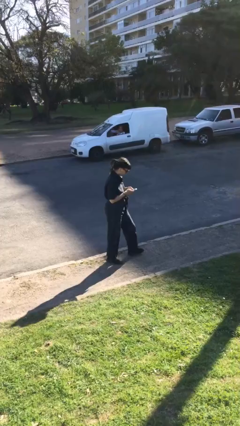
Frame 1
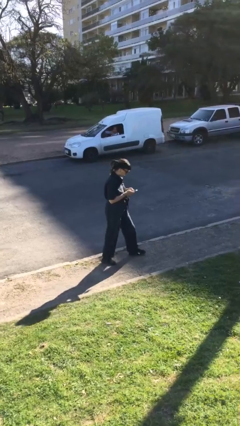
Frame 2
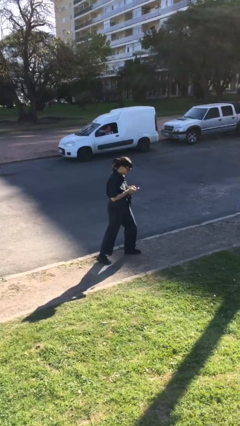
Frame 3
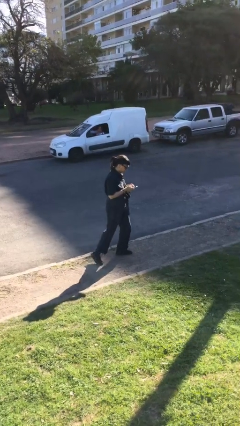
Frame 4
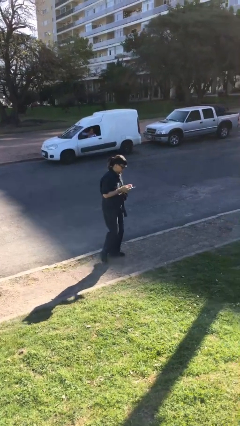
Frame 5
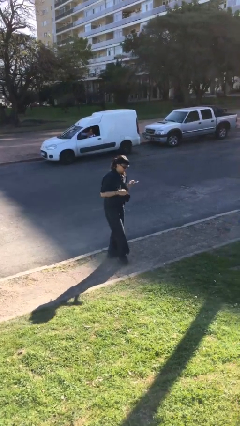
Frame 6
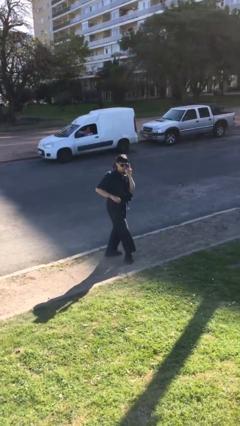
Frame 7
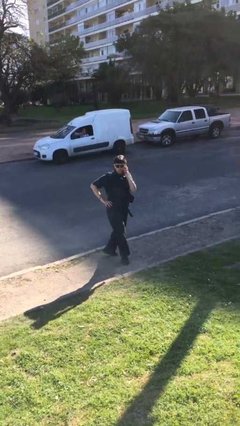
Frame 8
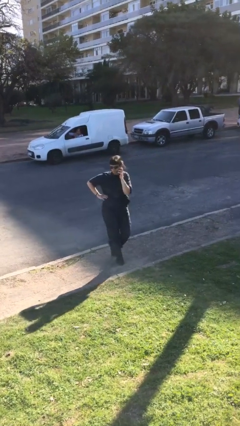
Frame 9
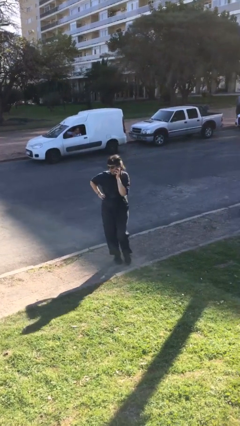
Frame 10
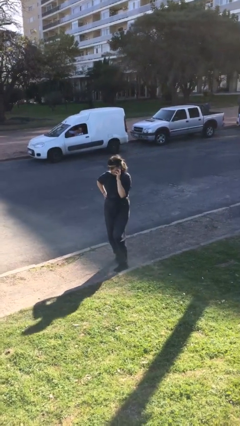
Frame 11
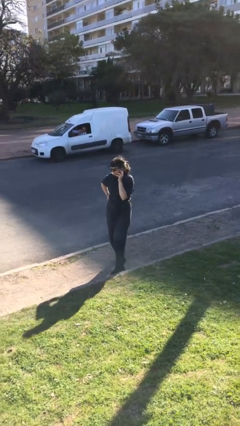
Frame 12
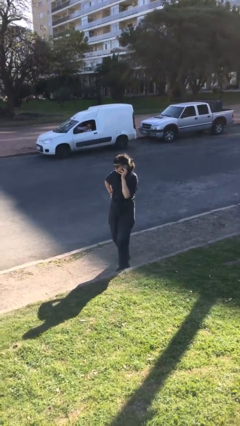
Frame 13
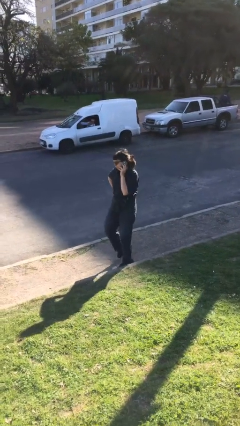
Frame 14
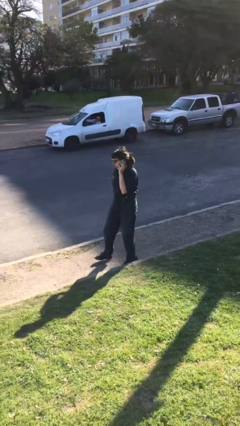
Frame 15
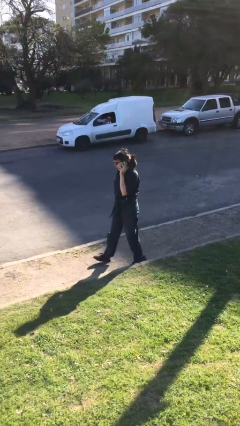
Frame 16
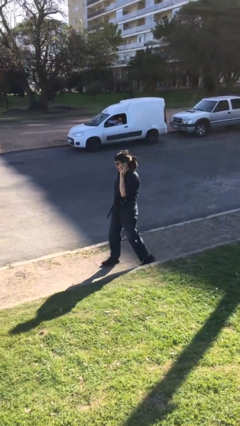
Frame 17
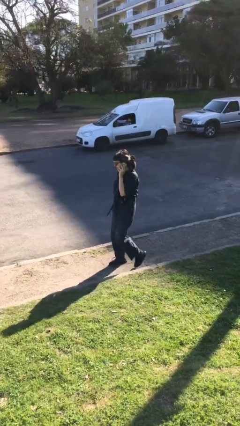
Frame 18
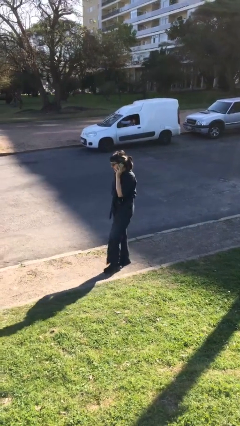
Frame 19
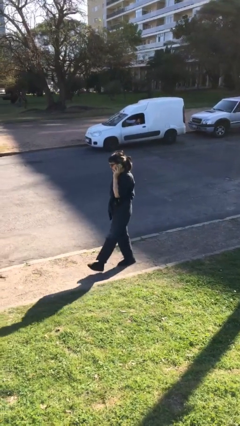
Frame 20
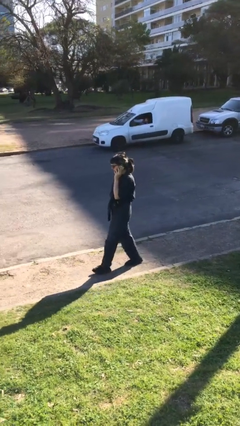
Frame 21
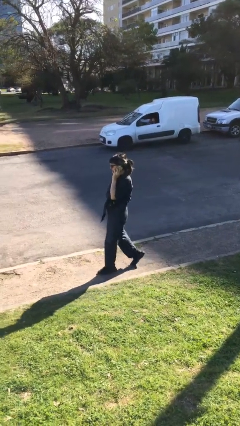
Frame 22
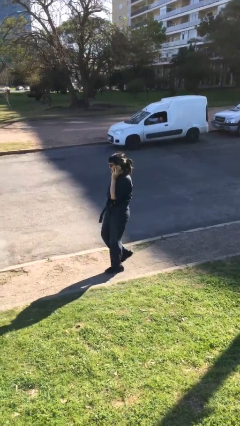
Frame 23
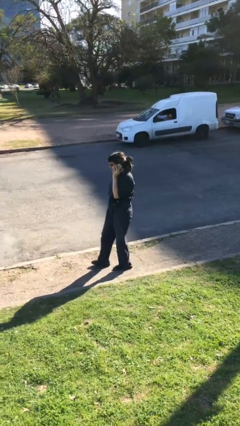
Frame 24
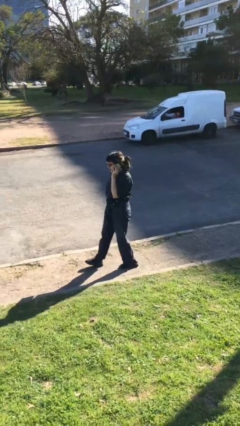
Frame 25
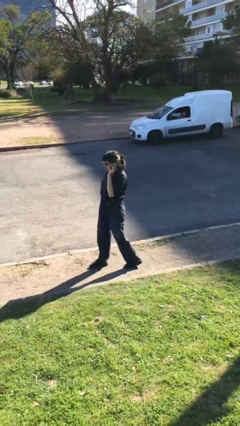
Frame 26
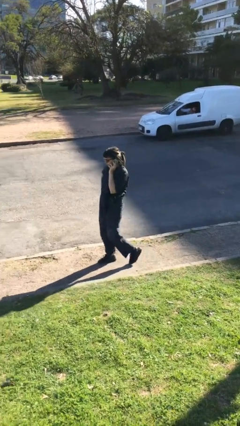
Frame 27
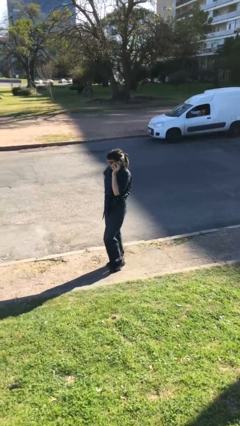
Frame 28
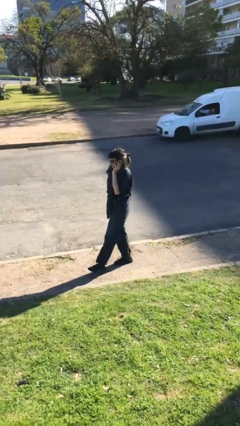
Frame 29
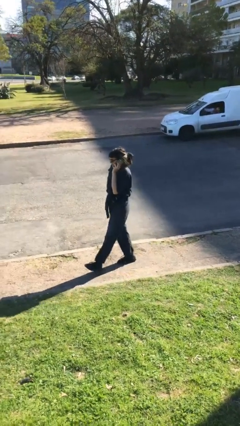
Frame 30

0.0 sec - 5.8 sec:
person talks on phone

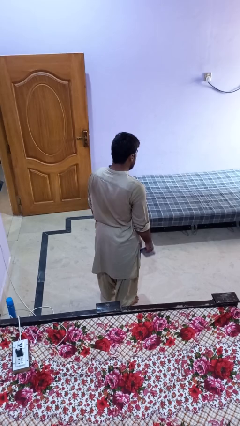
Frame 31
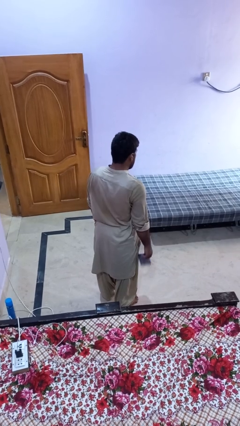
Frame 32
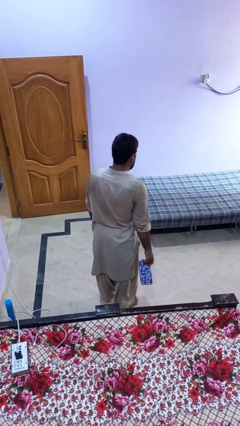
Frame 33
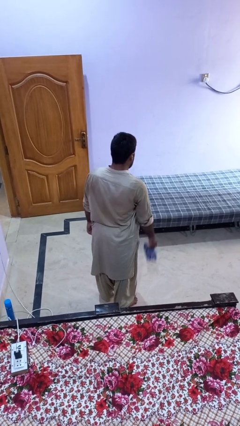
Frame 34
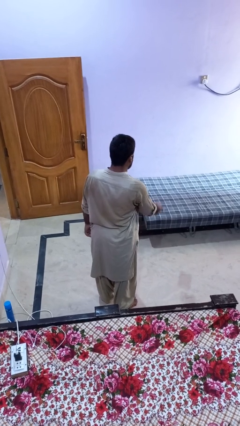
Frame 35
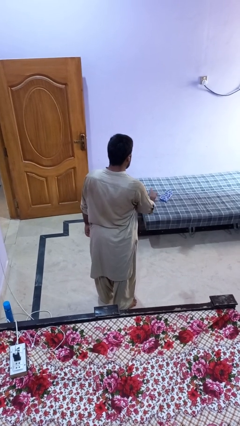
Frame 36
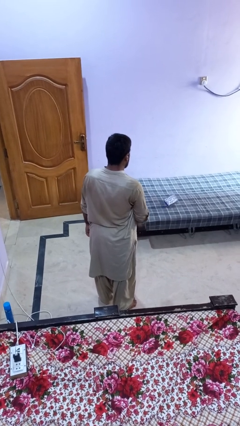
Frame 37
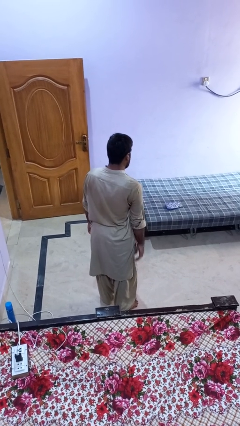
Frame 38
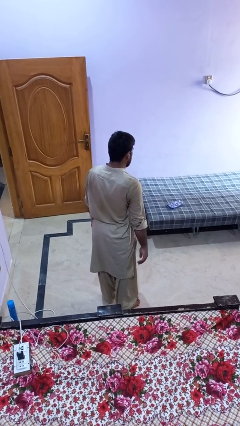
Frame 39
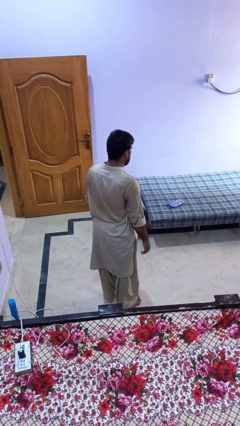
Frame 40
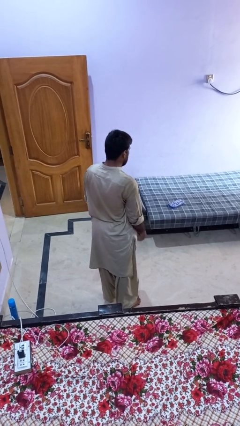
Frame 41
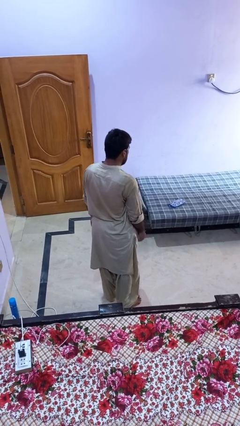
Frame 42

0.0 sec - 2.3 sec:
person throws object on bed

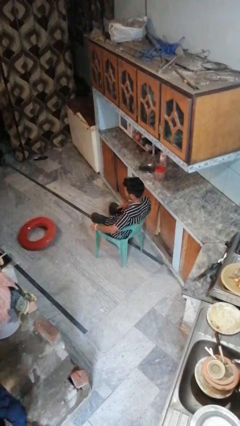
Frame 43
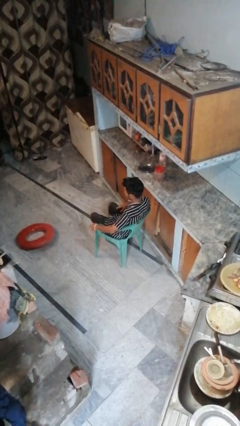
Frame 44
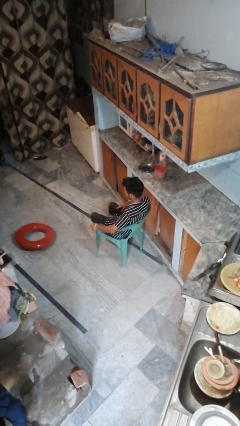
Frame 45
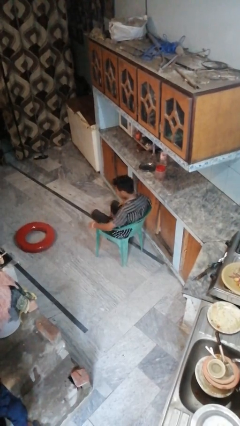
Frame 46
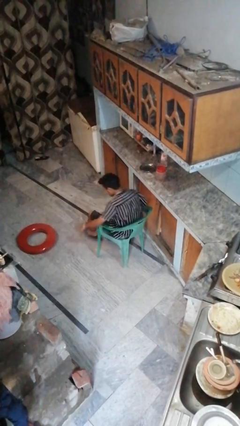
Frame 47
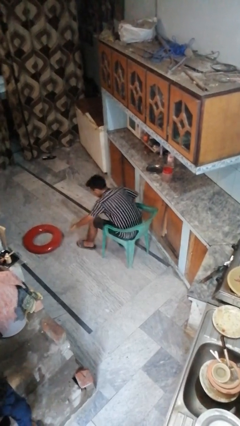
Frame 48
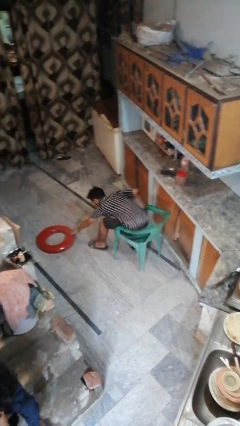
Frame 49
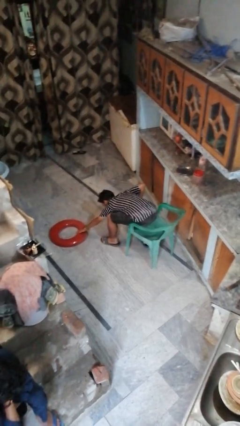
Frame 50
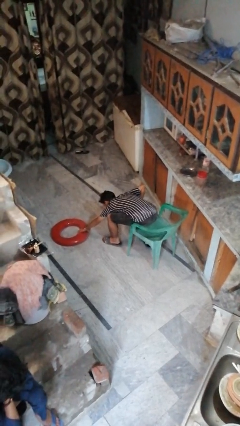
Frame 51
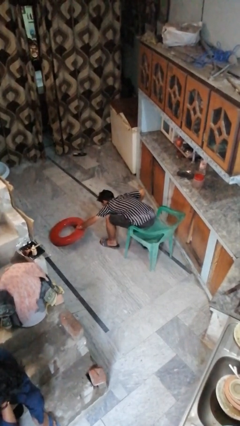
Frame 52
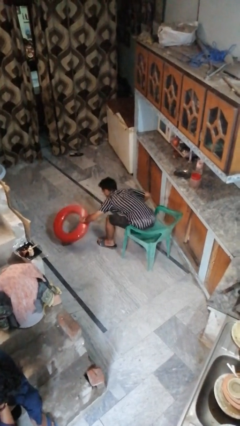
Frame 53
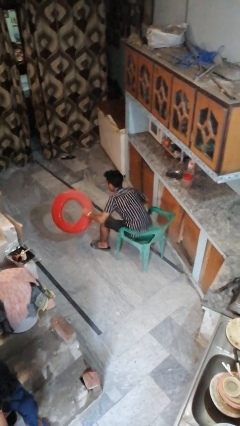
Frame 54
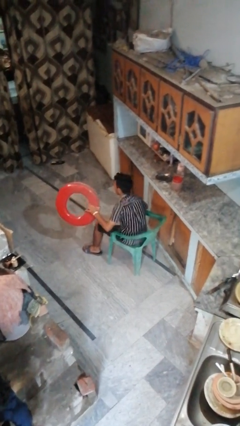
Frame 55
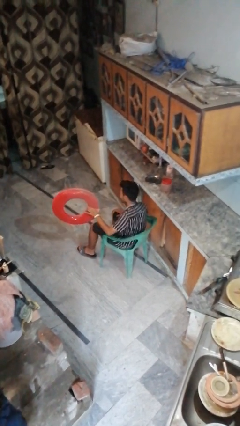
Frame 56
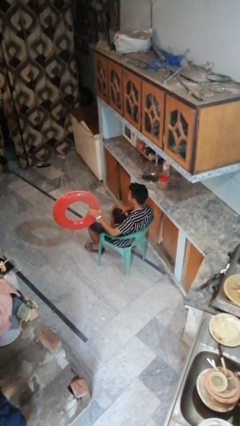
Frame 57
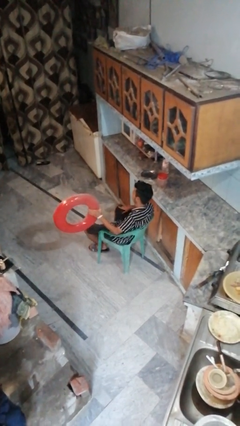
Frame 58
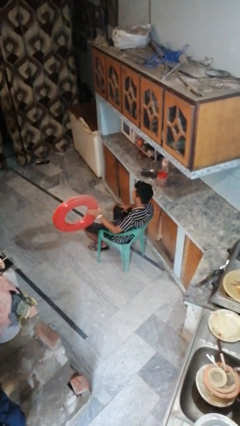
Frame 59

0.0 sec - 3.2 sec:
person picks up object from floor

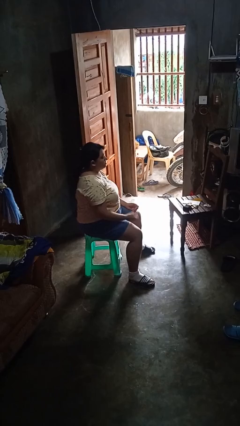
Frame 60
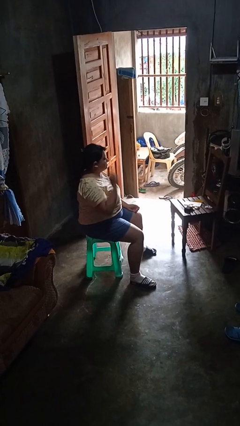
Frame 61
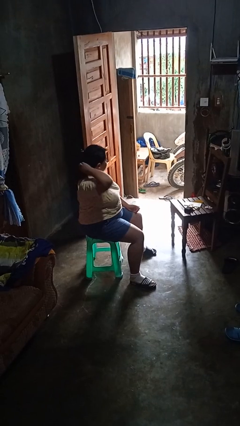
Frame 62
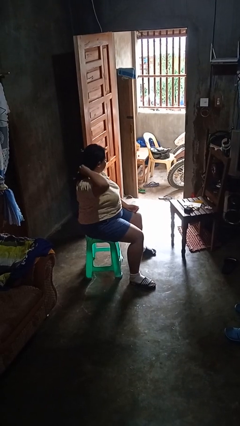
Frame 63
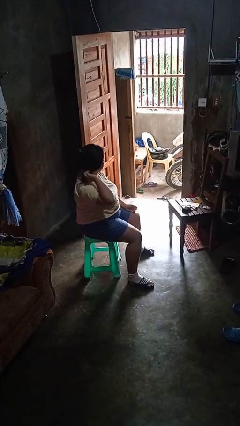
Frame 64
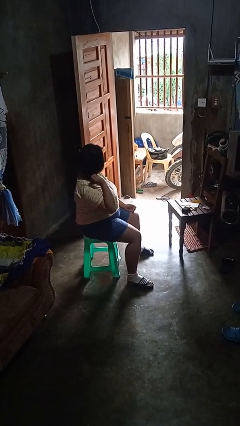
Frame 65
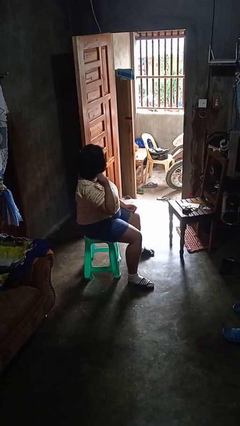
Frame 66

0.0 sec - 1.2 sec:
person takes off hairtie

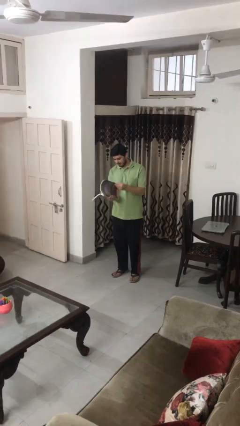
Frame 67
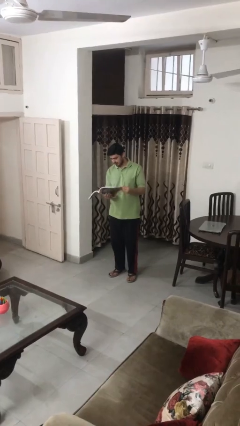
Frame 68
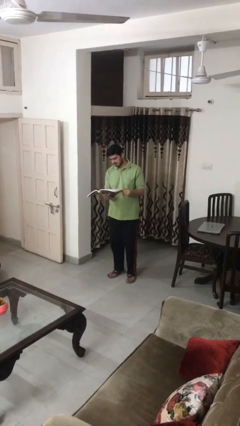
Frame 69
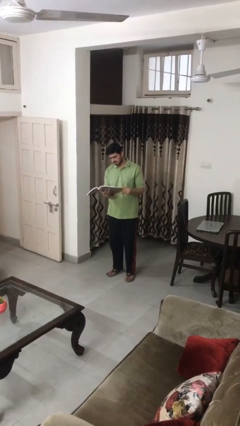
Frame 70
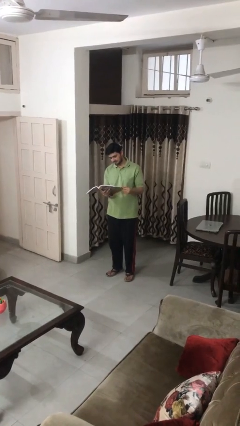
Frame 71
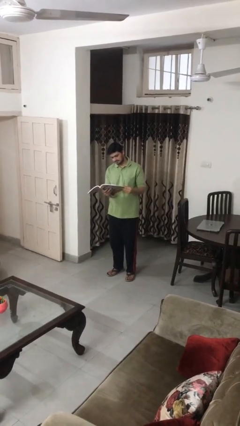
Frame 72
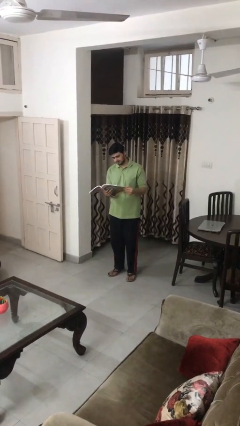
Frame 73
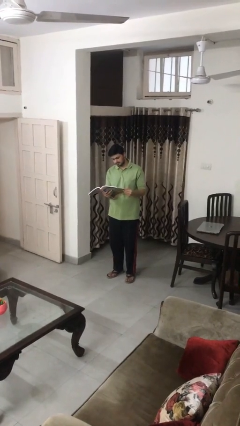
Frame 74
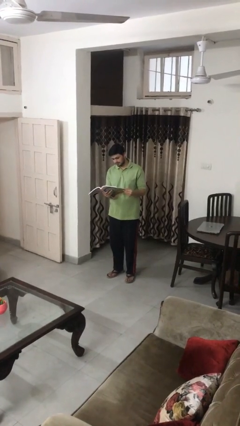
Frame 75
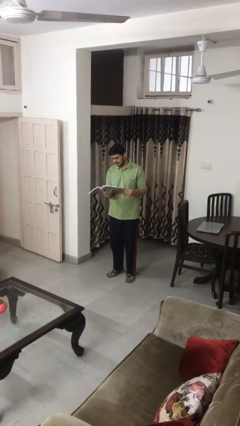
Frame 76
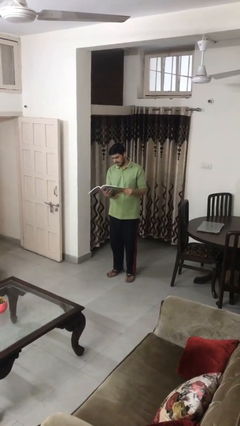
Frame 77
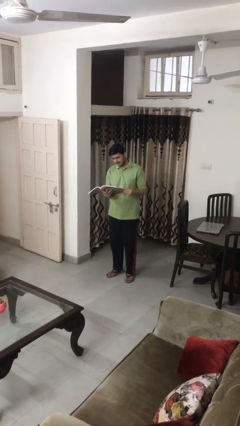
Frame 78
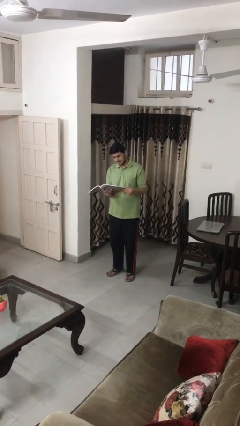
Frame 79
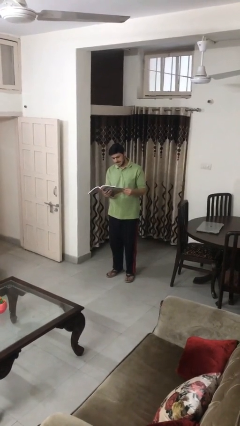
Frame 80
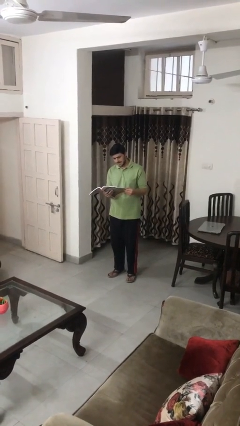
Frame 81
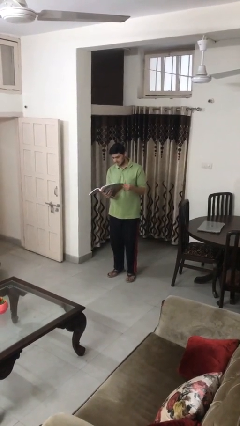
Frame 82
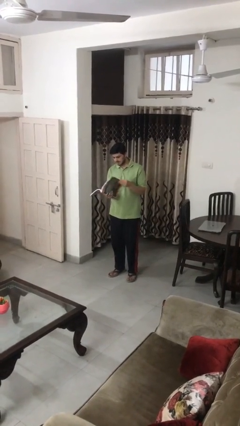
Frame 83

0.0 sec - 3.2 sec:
person reads document

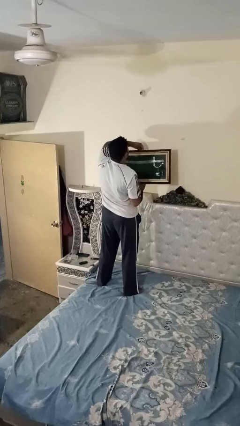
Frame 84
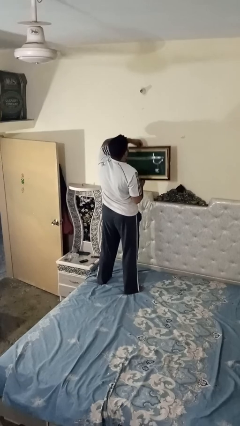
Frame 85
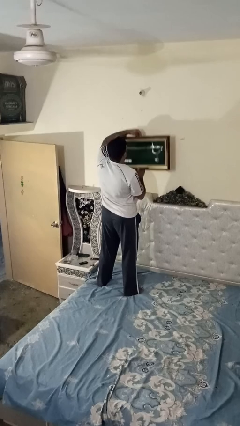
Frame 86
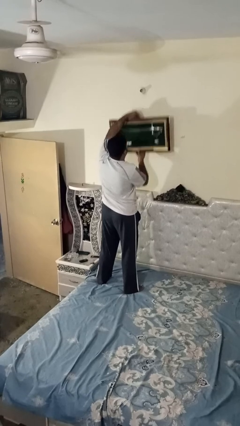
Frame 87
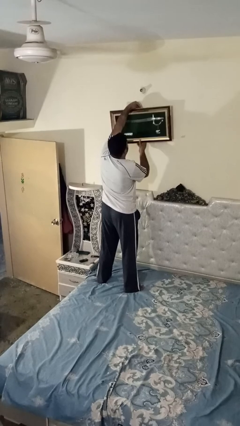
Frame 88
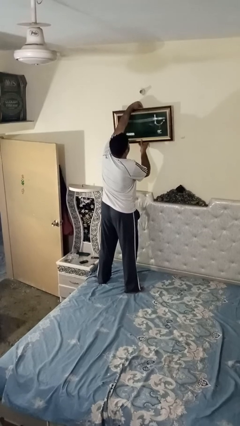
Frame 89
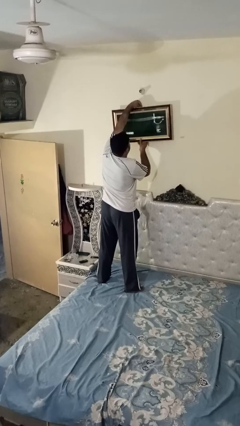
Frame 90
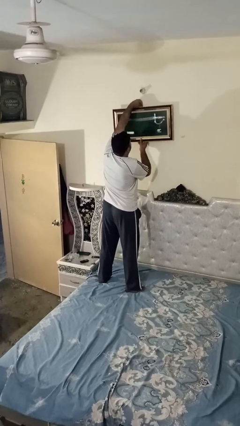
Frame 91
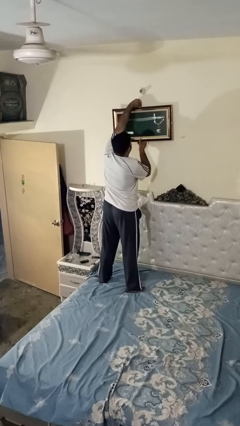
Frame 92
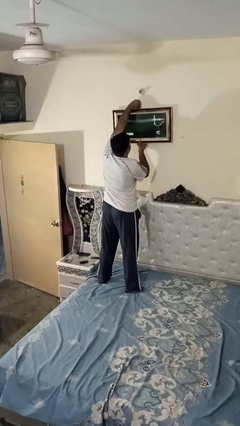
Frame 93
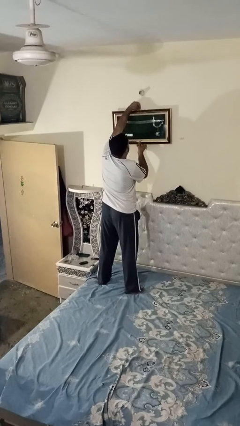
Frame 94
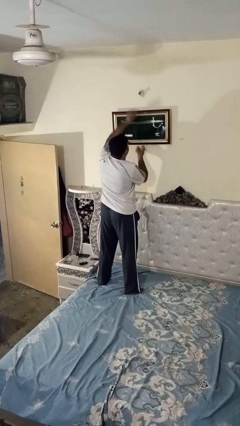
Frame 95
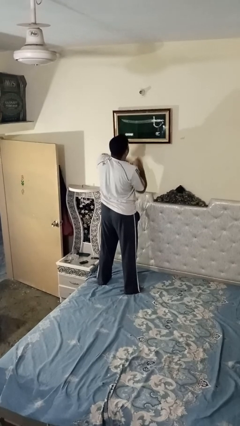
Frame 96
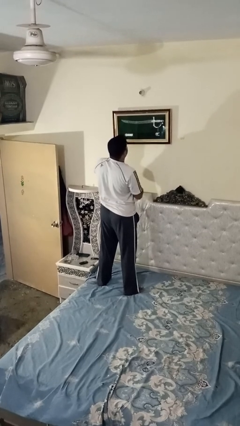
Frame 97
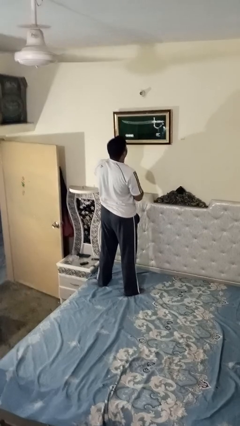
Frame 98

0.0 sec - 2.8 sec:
person puts up picture frame
